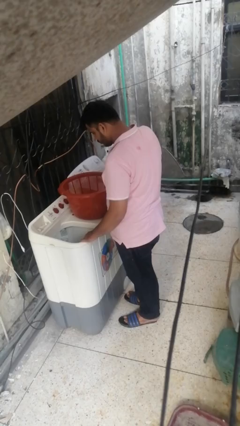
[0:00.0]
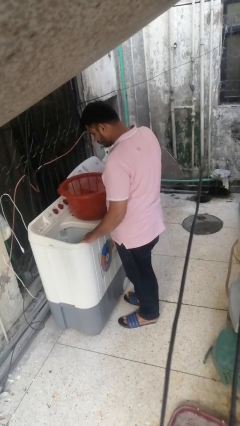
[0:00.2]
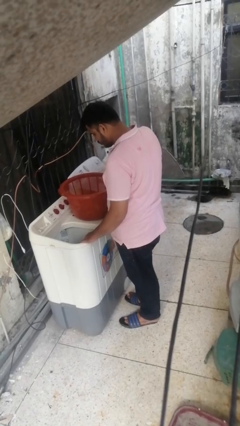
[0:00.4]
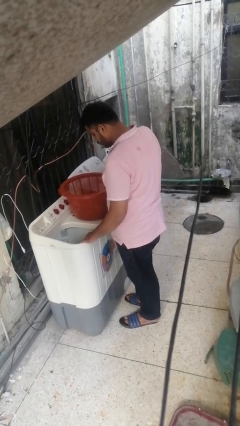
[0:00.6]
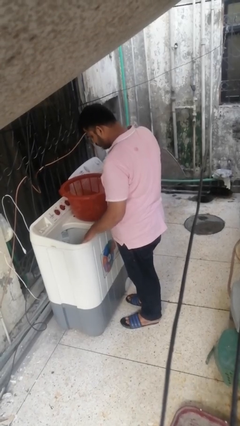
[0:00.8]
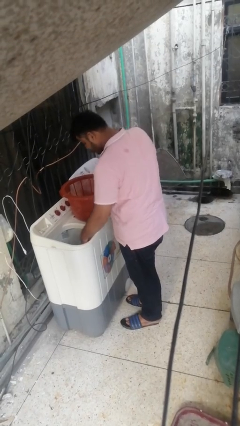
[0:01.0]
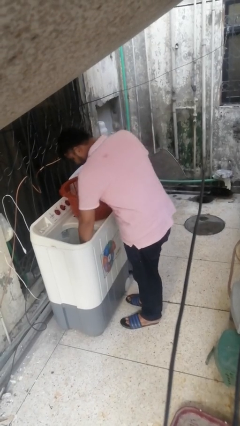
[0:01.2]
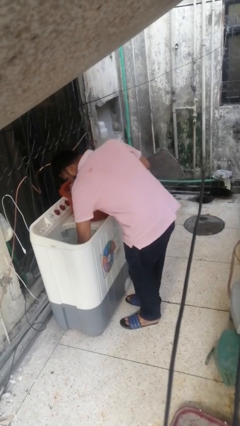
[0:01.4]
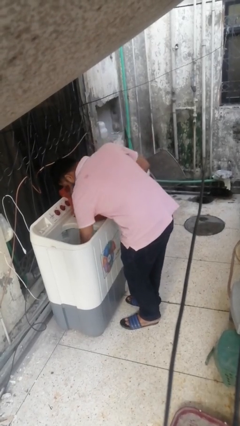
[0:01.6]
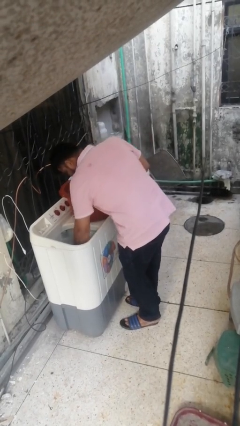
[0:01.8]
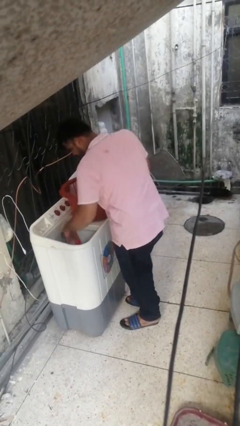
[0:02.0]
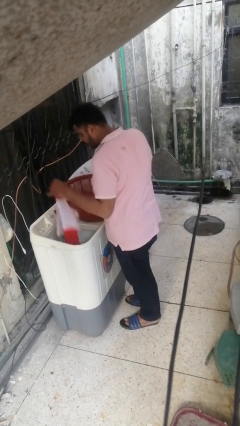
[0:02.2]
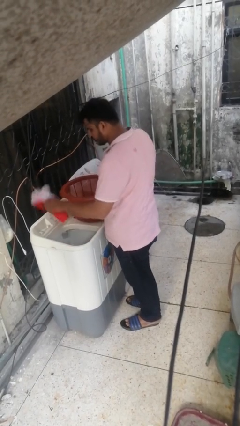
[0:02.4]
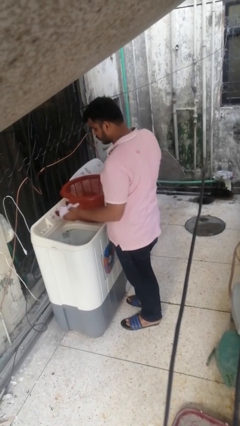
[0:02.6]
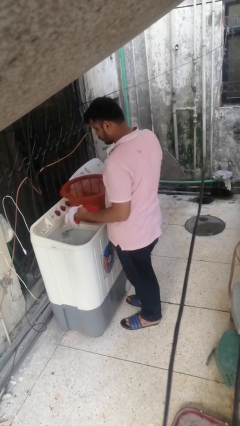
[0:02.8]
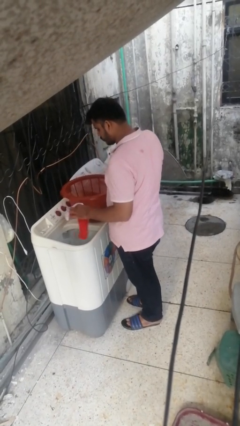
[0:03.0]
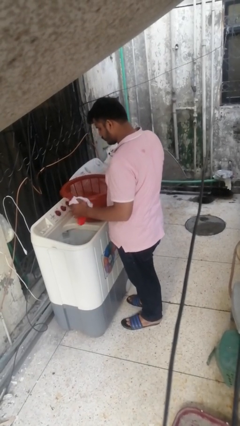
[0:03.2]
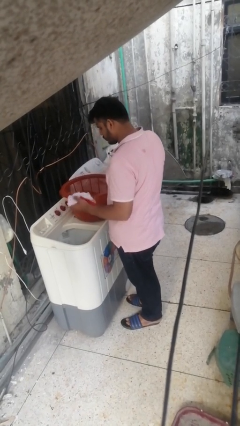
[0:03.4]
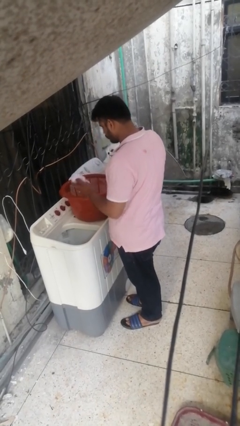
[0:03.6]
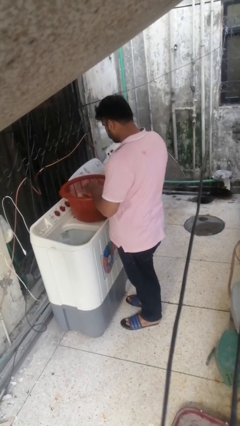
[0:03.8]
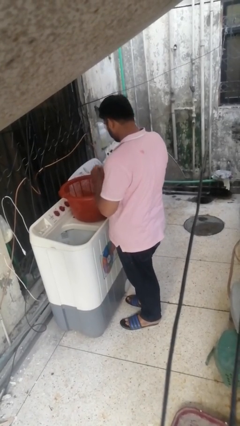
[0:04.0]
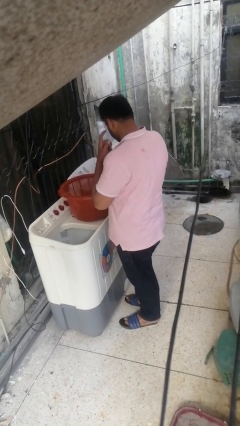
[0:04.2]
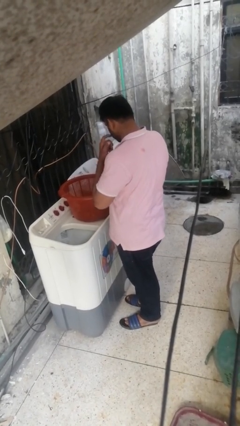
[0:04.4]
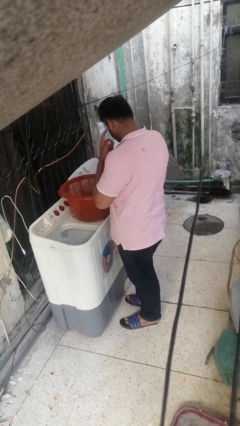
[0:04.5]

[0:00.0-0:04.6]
person unloads clotheswasher

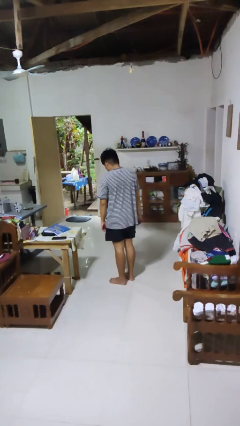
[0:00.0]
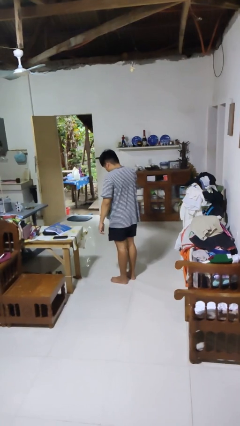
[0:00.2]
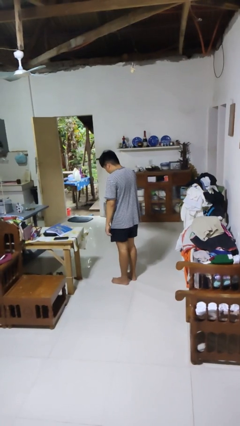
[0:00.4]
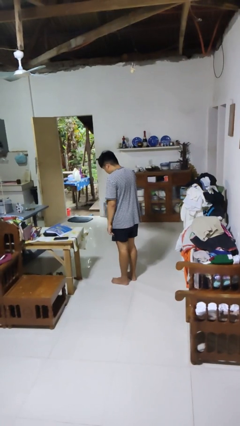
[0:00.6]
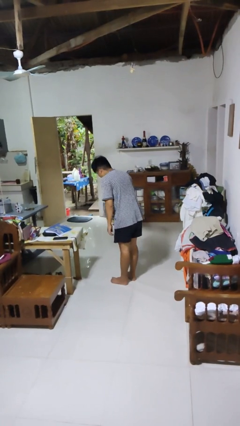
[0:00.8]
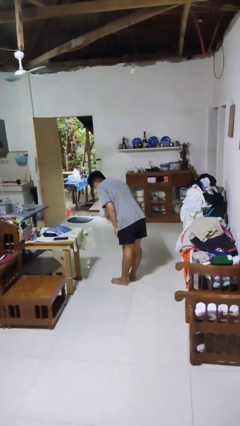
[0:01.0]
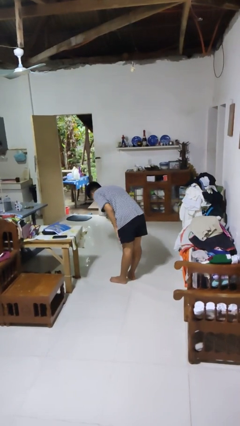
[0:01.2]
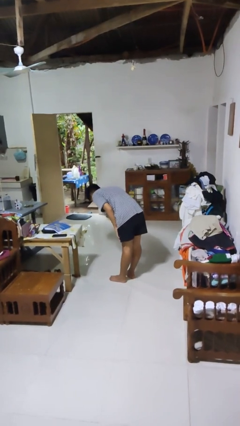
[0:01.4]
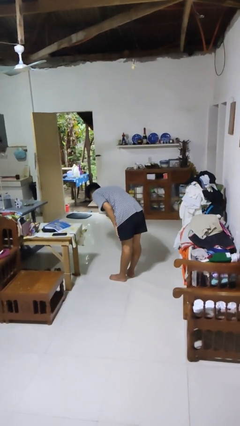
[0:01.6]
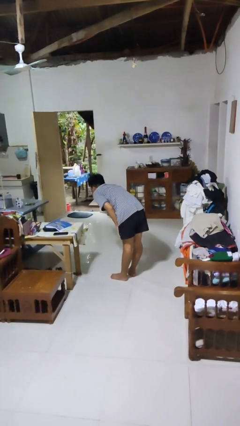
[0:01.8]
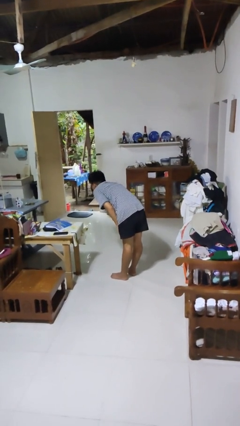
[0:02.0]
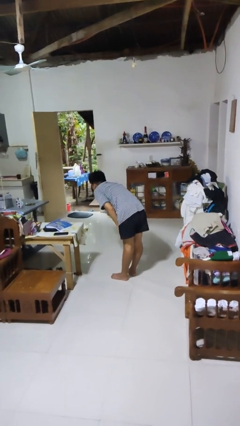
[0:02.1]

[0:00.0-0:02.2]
person bows

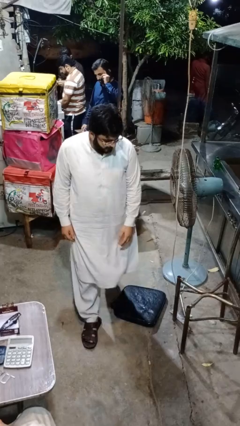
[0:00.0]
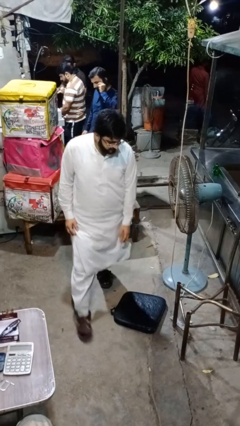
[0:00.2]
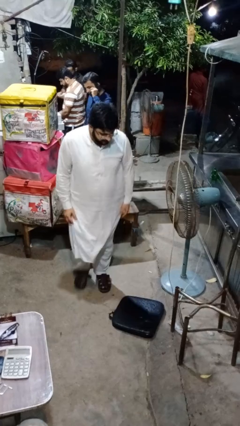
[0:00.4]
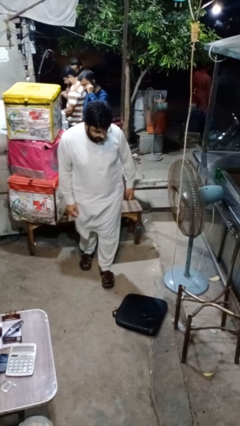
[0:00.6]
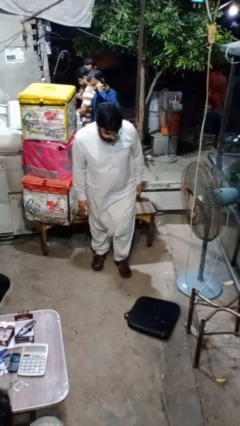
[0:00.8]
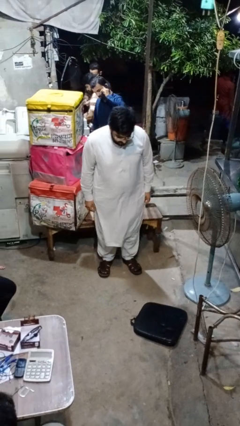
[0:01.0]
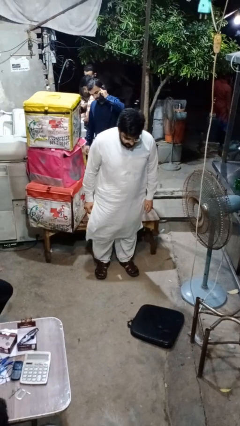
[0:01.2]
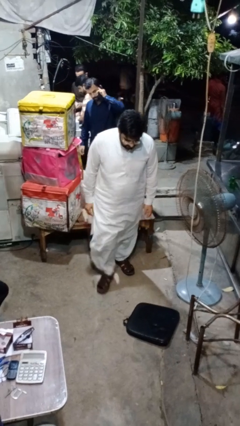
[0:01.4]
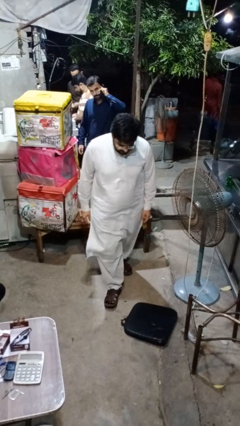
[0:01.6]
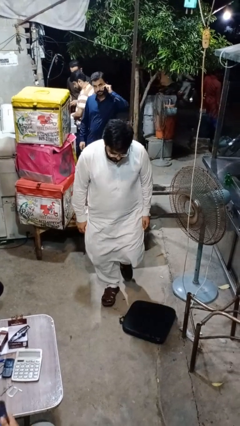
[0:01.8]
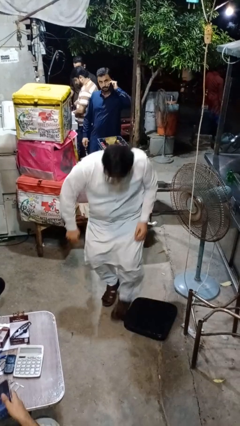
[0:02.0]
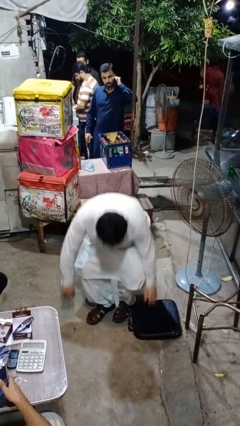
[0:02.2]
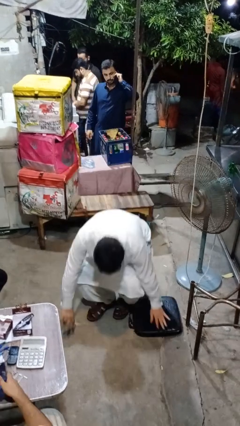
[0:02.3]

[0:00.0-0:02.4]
person trips on object on floor

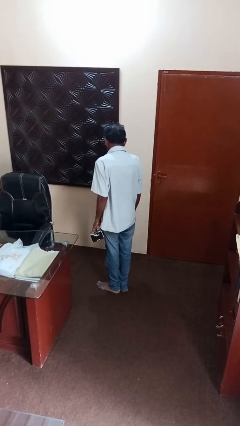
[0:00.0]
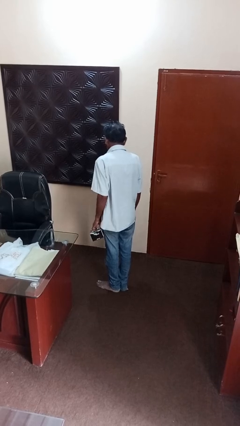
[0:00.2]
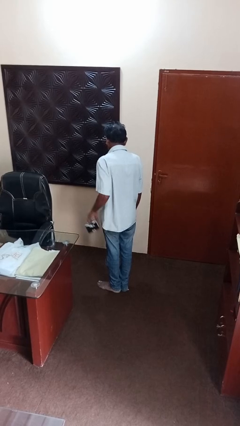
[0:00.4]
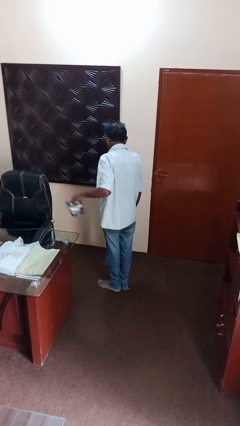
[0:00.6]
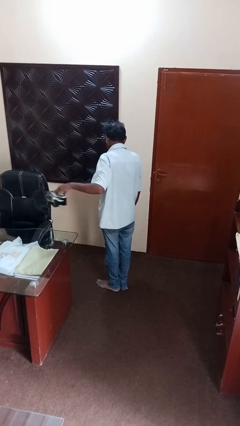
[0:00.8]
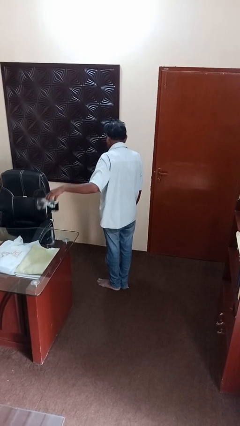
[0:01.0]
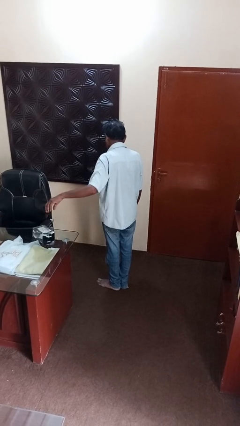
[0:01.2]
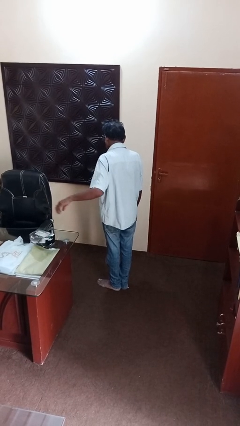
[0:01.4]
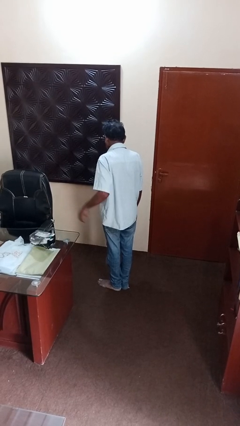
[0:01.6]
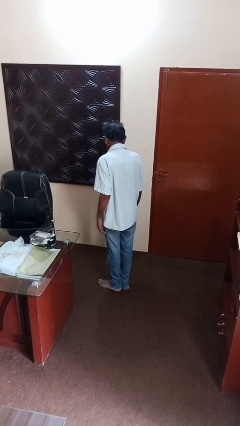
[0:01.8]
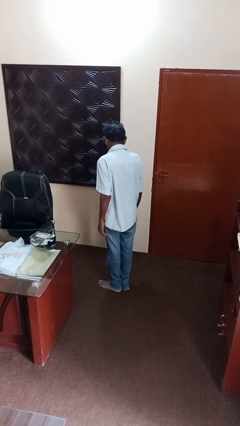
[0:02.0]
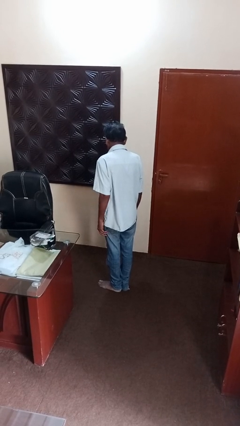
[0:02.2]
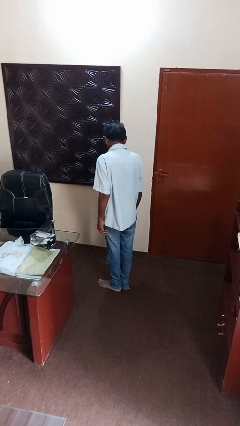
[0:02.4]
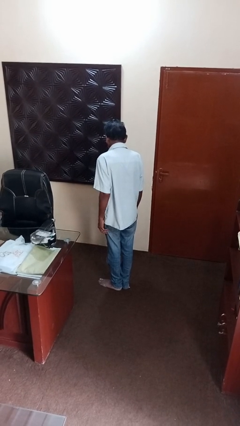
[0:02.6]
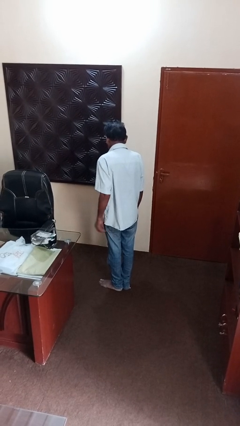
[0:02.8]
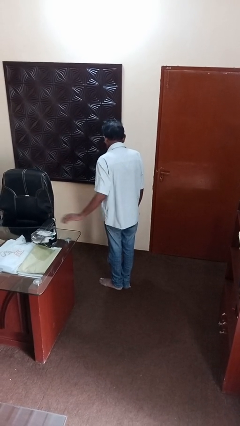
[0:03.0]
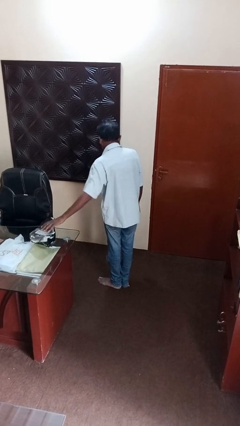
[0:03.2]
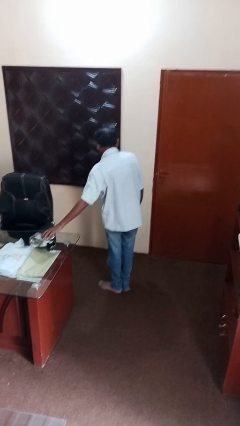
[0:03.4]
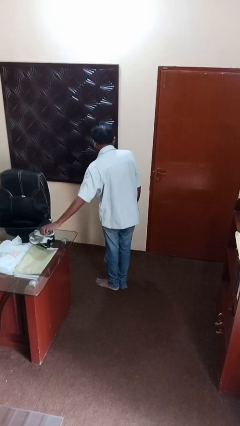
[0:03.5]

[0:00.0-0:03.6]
person throws object on table

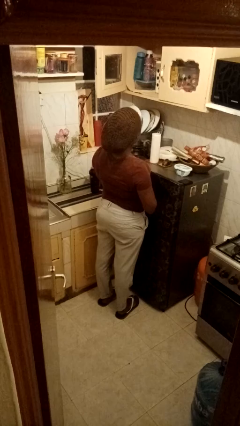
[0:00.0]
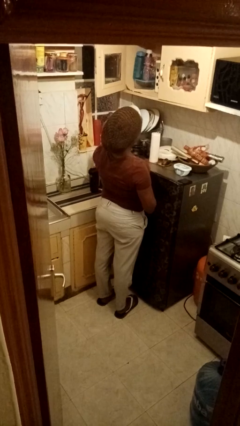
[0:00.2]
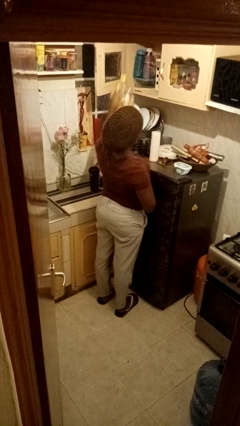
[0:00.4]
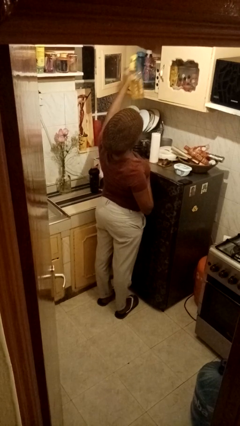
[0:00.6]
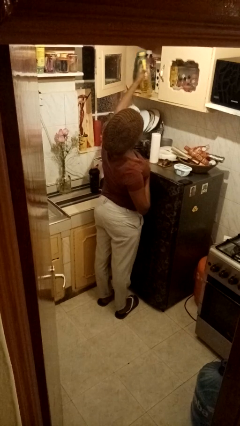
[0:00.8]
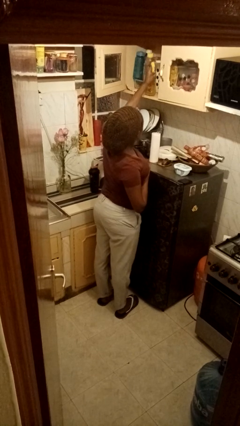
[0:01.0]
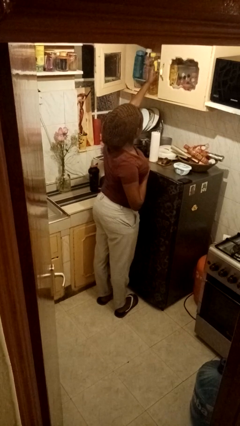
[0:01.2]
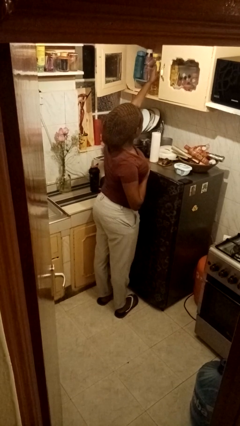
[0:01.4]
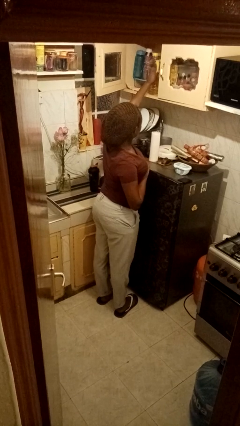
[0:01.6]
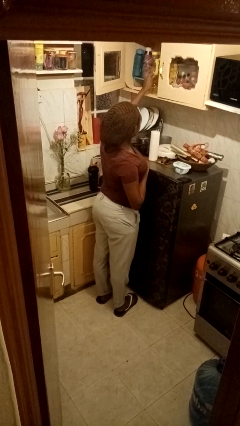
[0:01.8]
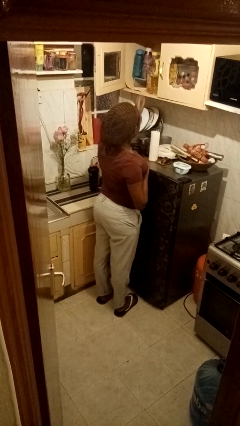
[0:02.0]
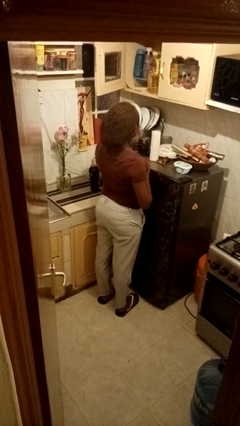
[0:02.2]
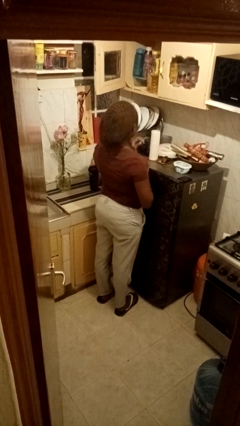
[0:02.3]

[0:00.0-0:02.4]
person puts down object on shelf

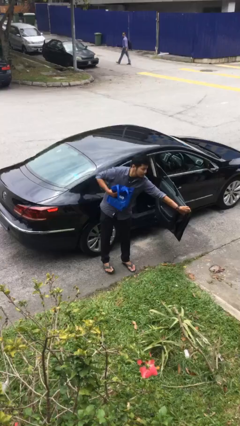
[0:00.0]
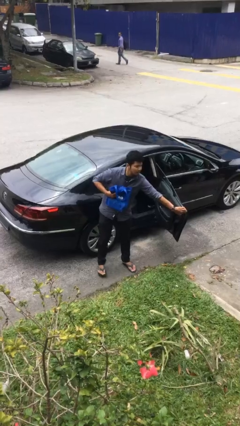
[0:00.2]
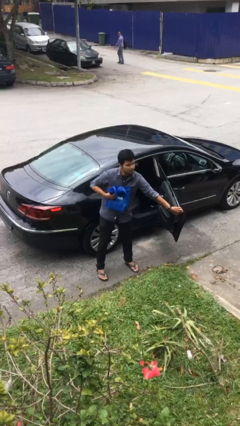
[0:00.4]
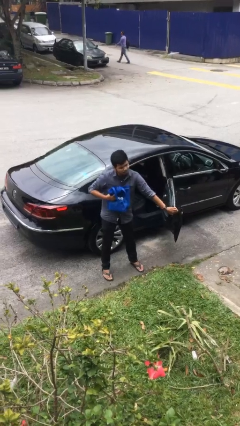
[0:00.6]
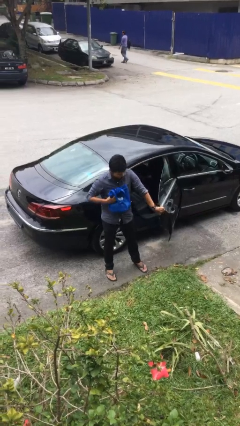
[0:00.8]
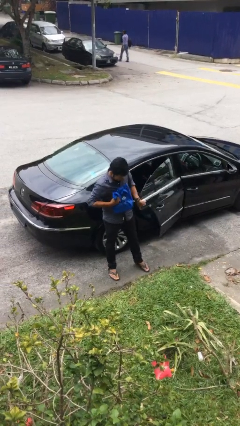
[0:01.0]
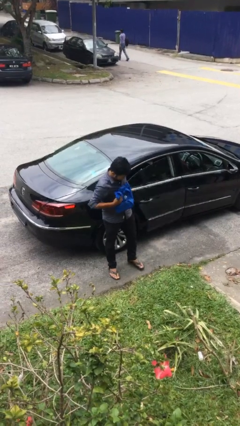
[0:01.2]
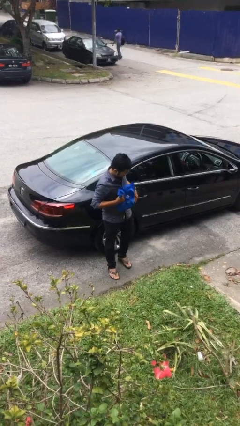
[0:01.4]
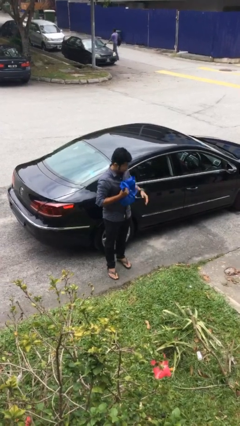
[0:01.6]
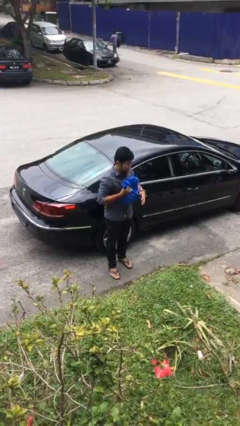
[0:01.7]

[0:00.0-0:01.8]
person closes car door

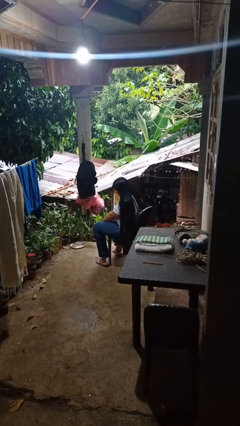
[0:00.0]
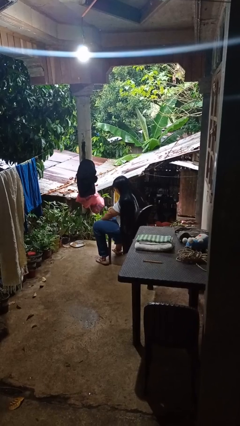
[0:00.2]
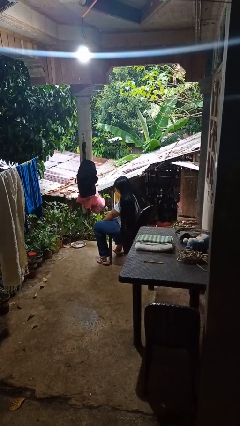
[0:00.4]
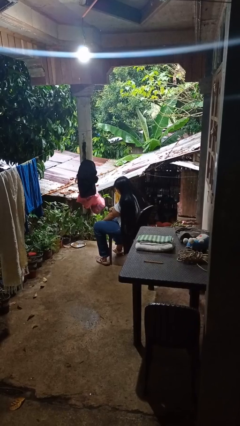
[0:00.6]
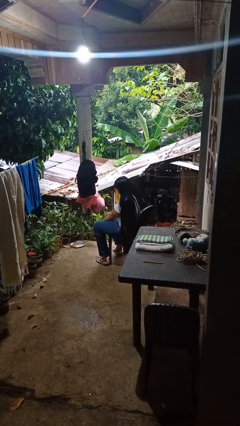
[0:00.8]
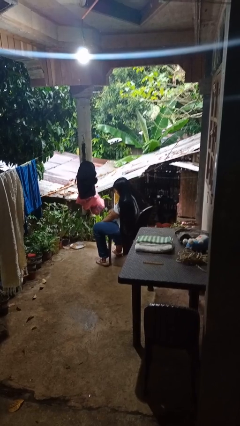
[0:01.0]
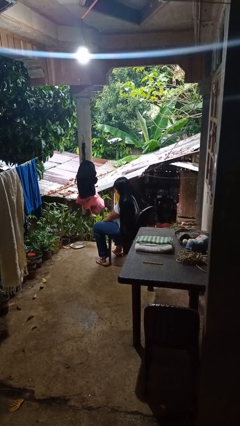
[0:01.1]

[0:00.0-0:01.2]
person swats bug
